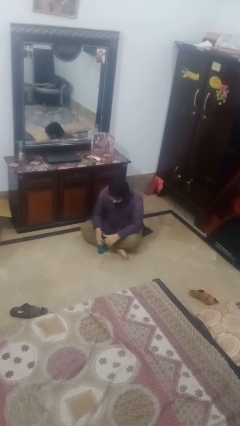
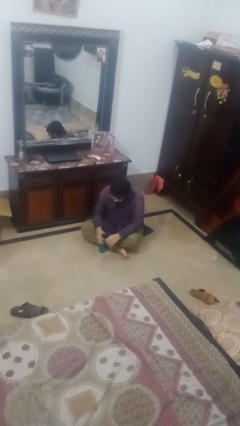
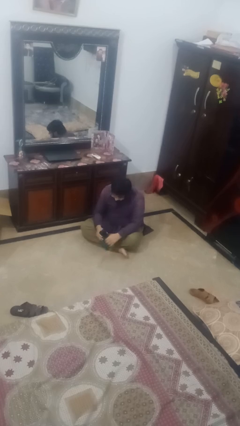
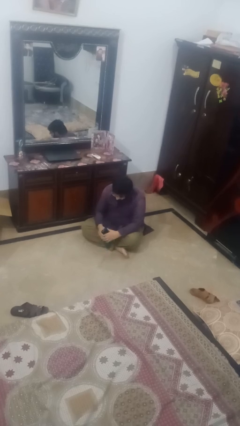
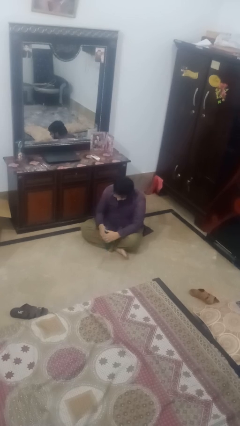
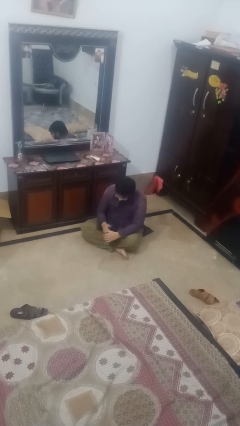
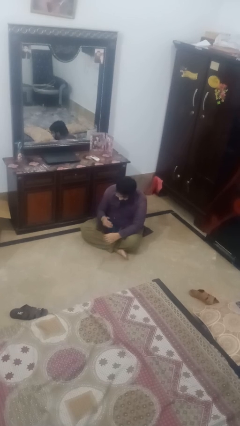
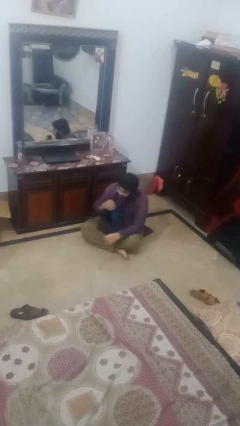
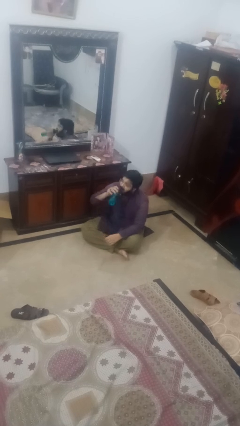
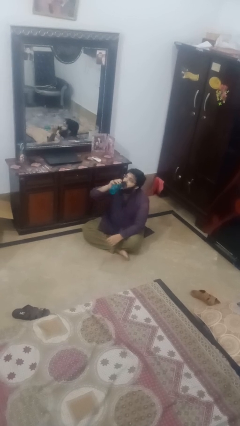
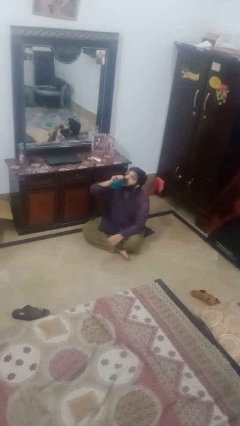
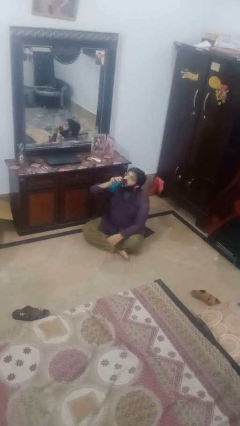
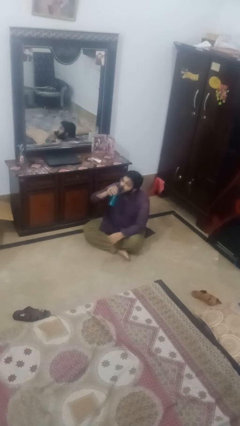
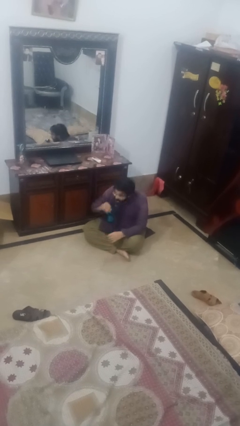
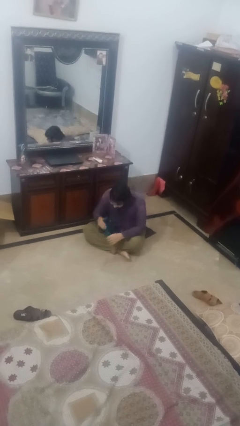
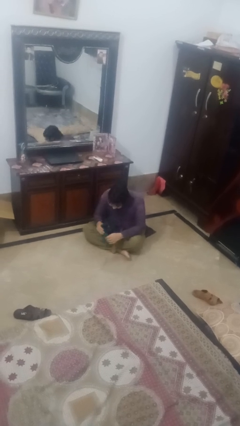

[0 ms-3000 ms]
person drinks from bottle

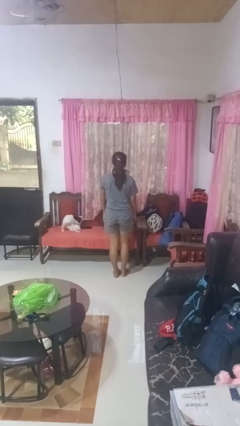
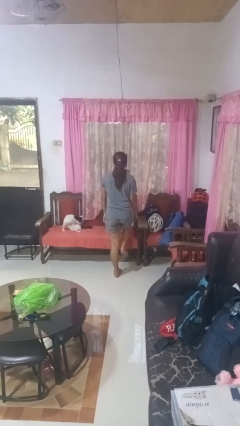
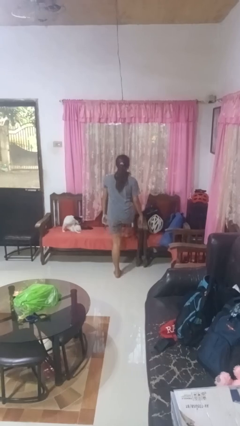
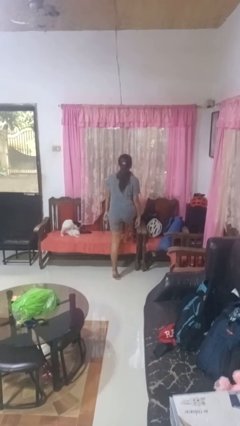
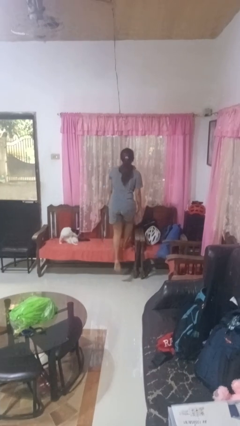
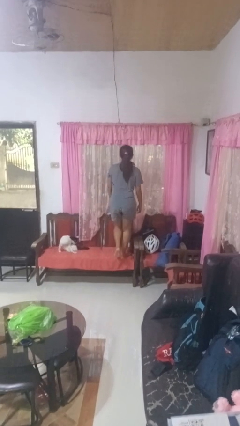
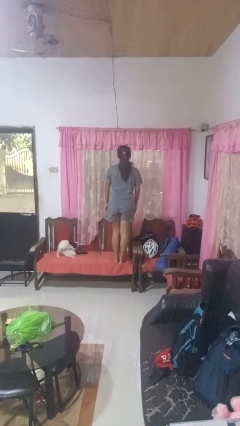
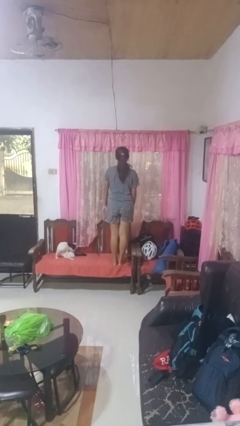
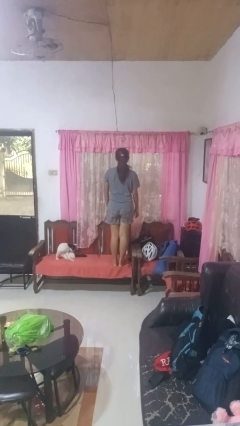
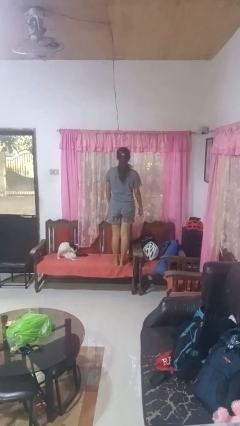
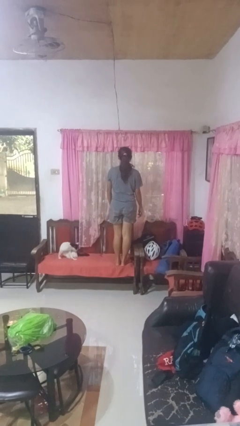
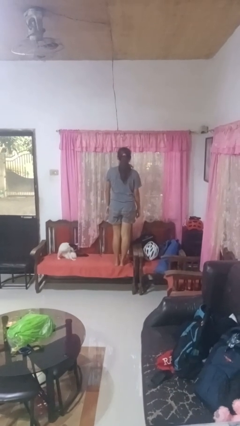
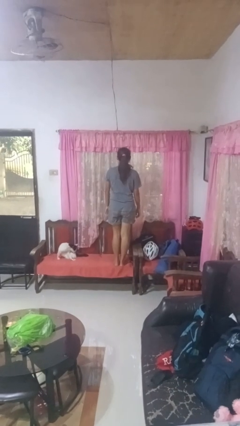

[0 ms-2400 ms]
person climbs on chair

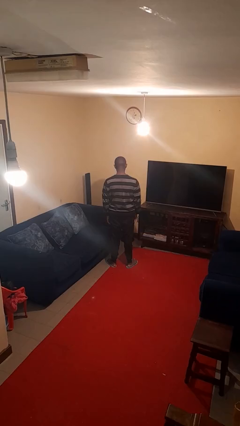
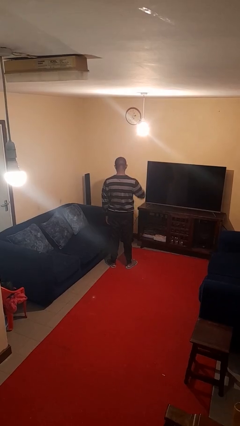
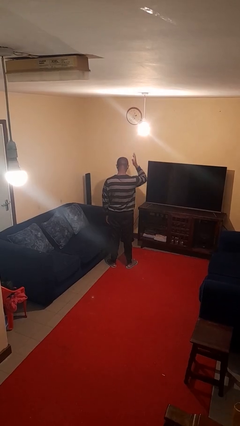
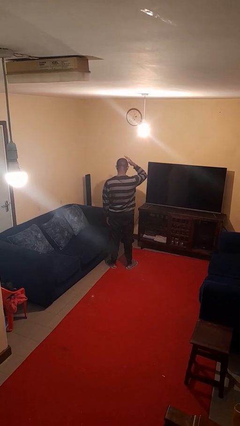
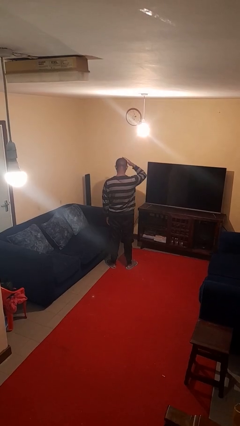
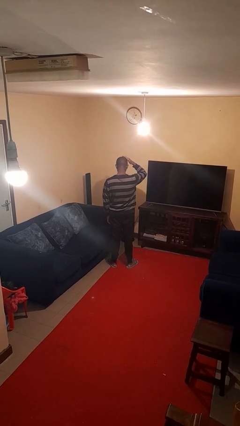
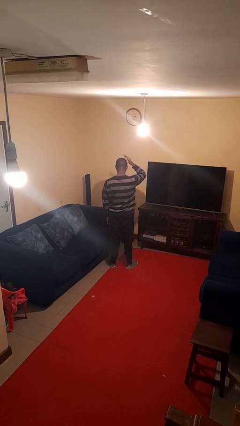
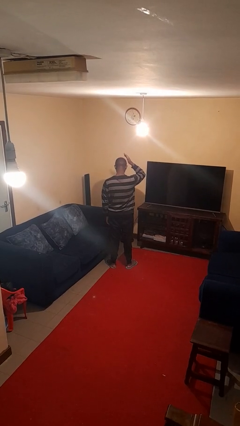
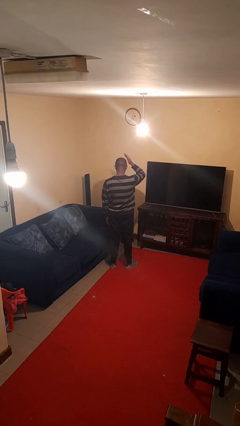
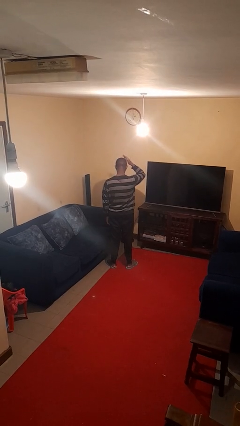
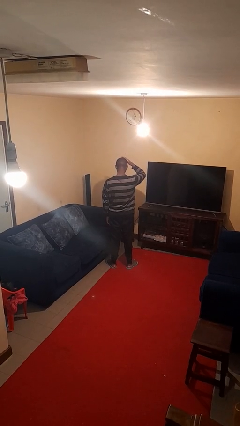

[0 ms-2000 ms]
person pats head

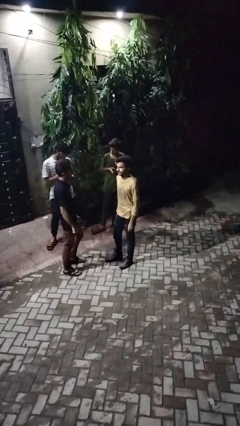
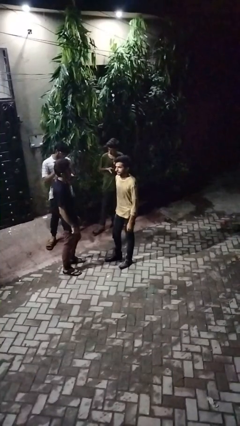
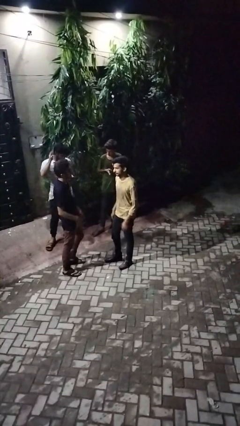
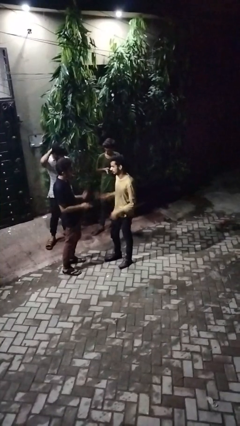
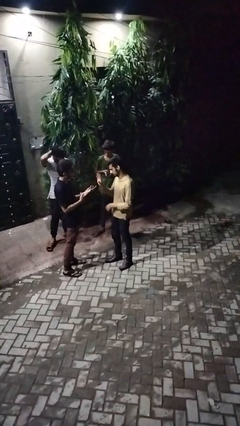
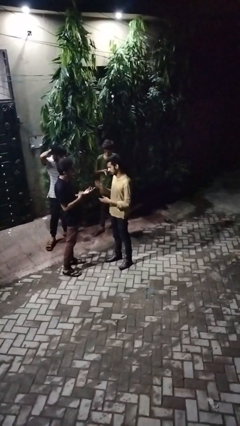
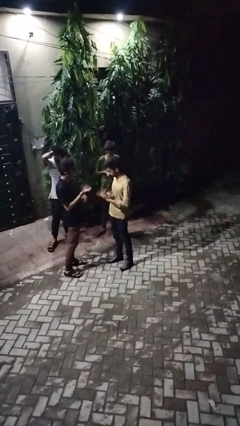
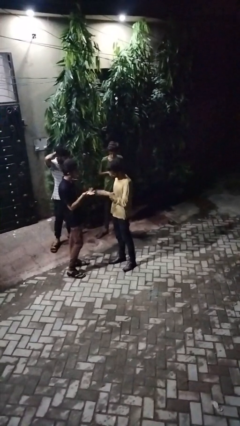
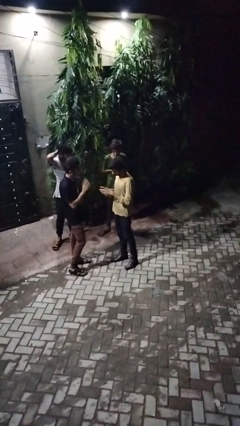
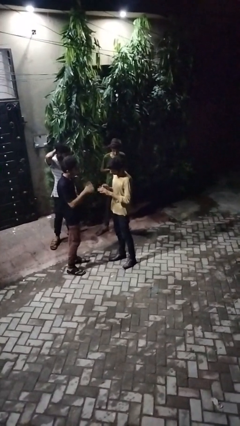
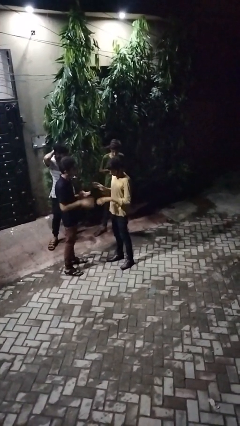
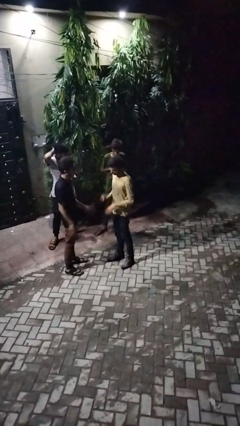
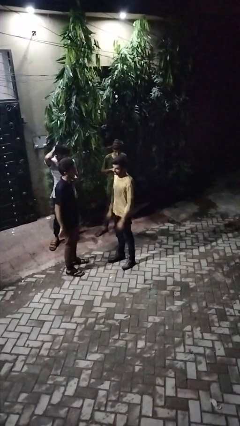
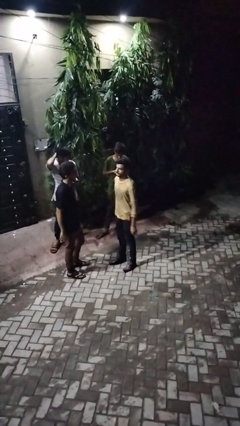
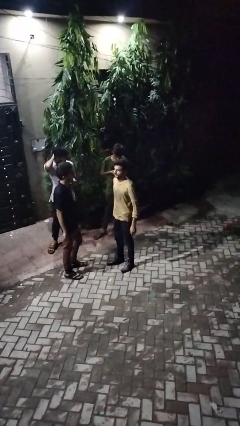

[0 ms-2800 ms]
person talks to person

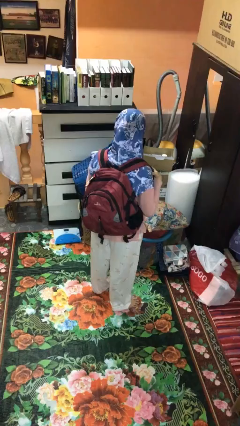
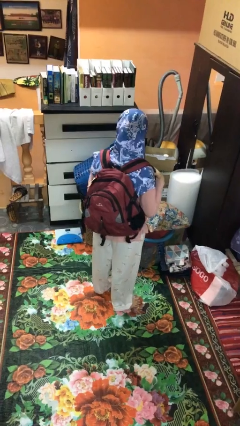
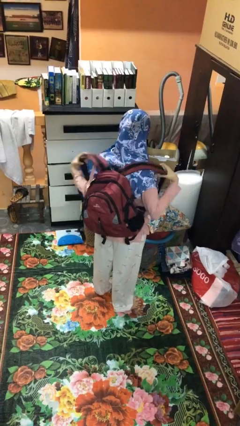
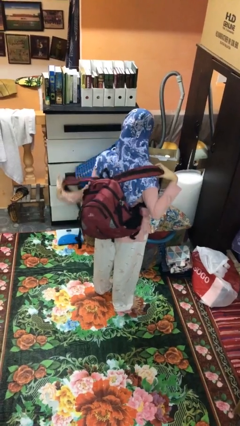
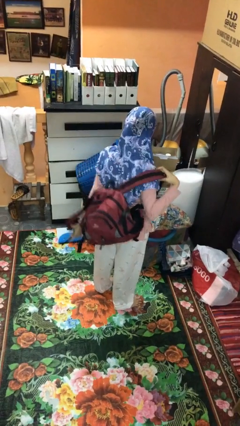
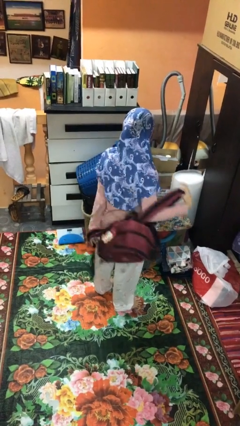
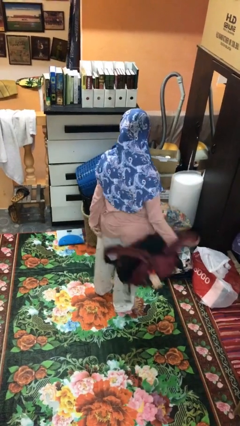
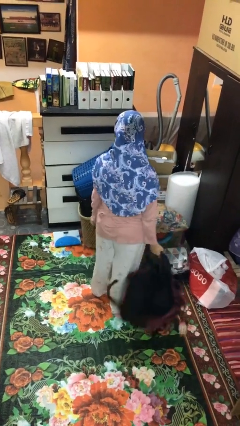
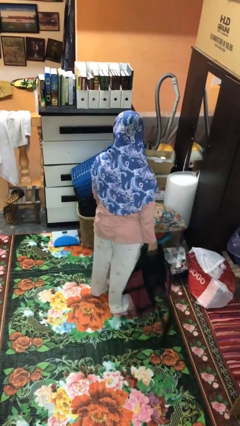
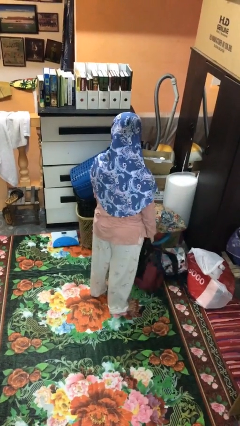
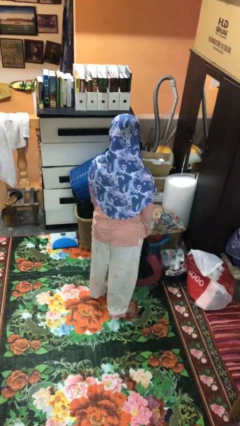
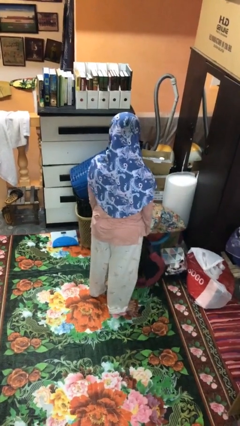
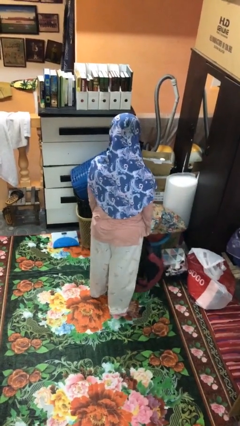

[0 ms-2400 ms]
person takes off backpack

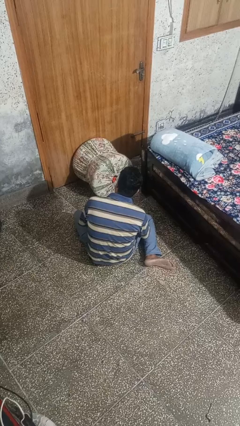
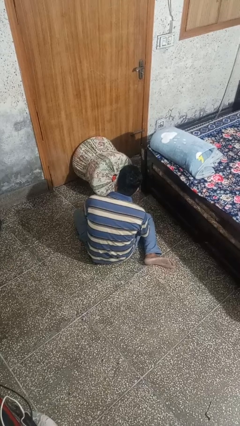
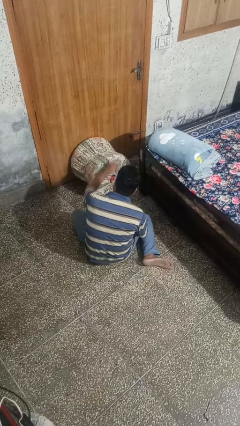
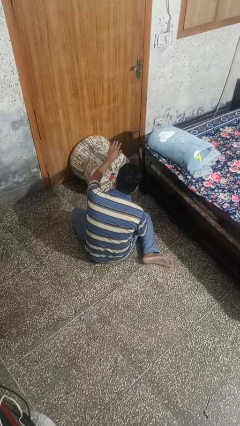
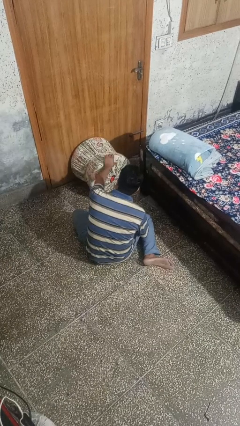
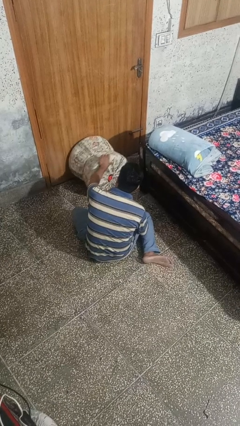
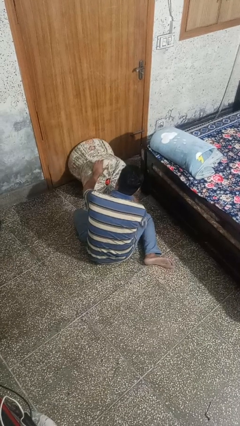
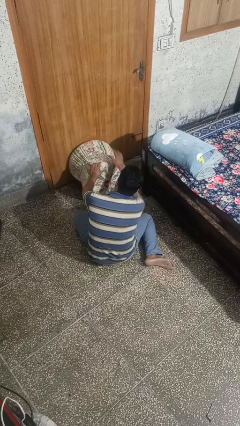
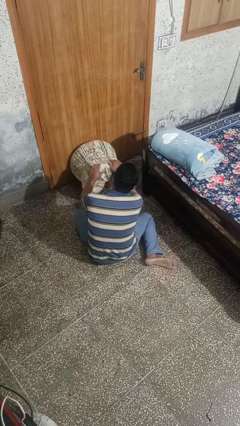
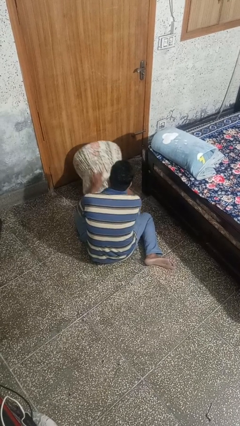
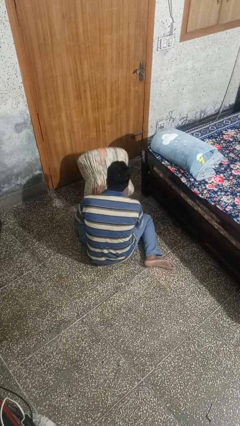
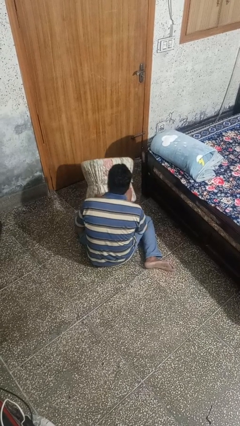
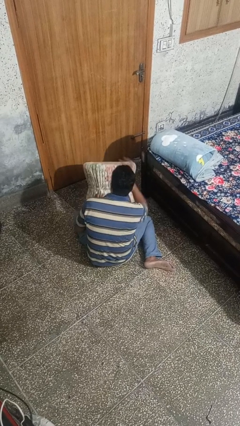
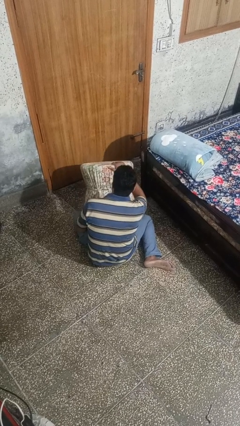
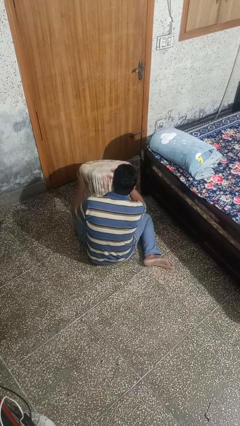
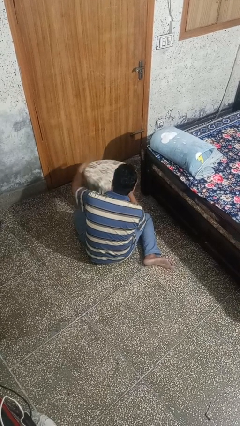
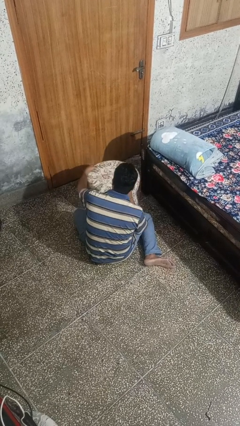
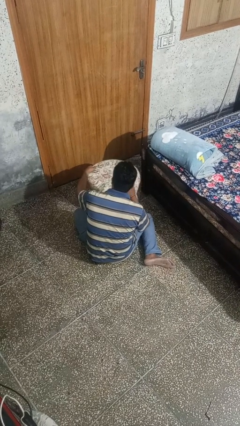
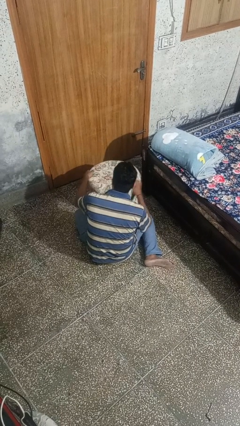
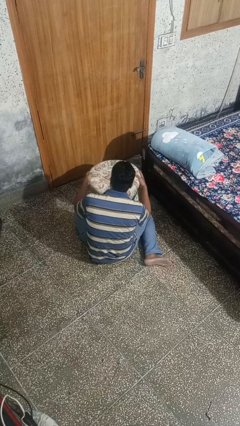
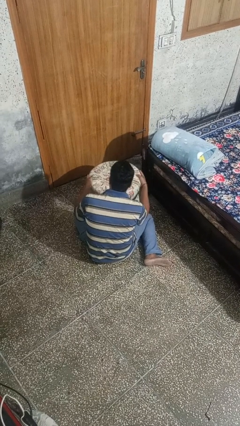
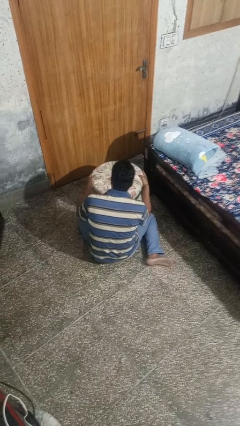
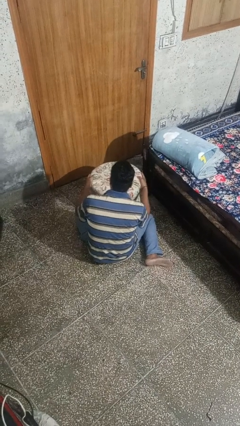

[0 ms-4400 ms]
person sets upright furniture

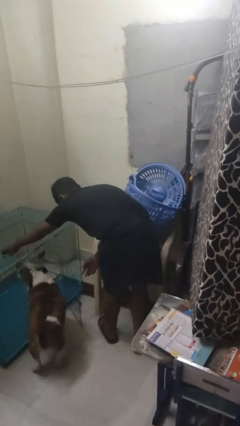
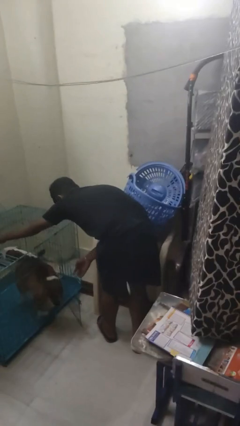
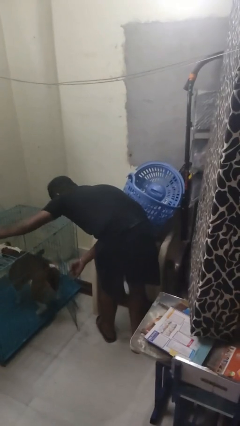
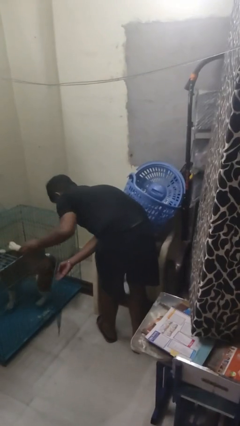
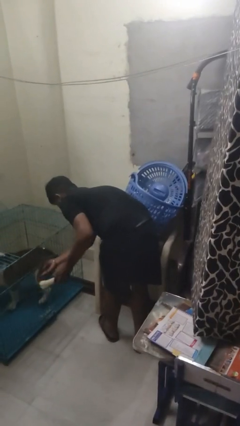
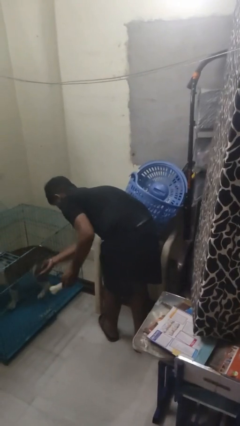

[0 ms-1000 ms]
person crates dog
